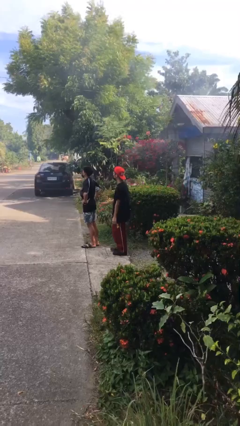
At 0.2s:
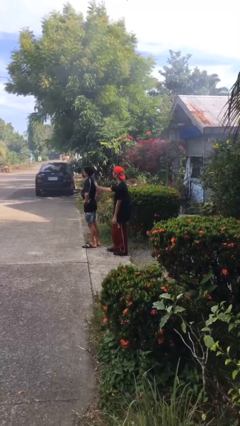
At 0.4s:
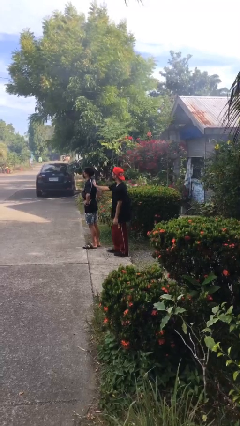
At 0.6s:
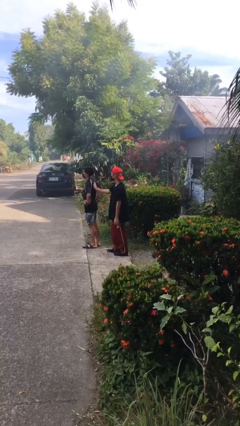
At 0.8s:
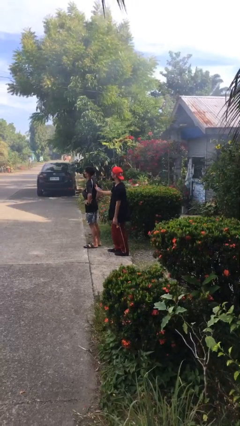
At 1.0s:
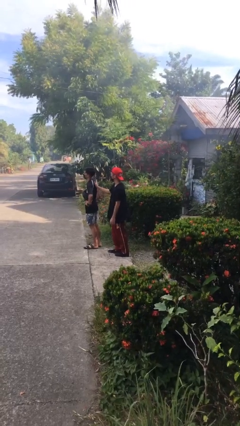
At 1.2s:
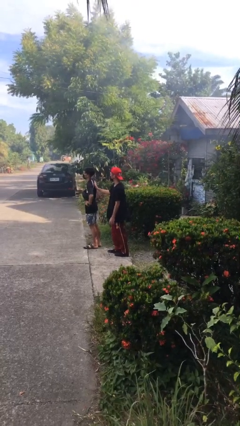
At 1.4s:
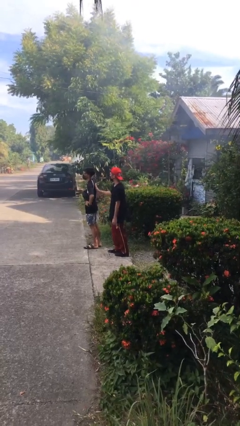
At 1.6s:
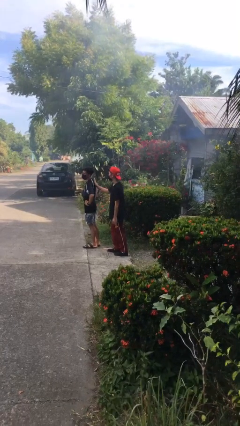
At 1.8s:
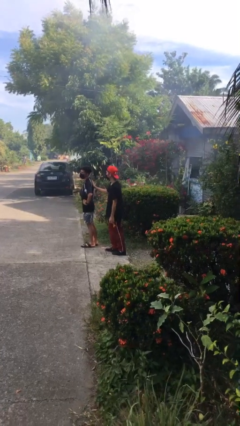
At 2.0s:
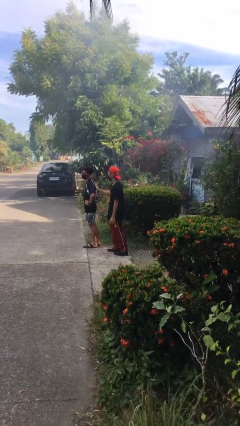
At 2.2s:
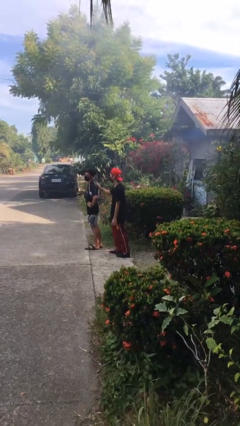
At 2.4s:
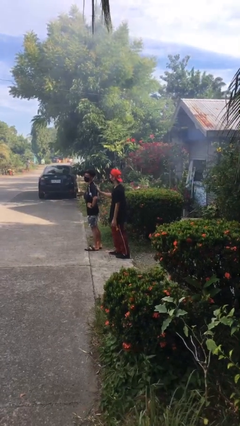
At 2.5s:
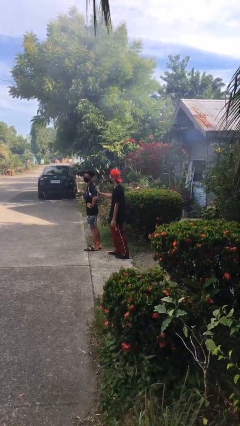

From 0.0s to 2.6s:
person touches back of person

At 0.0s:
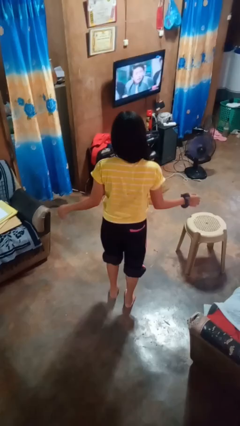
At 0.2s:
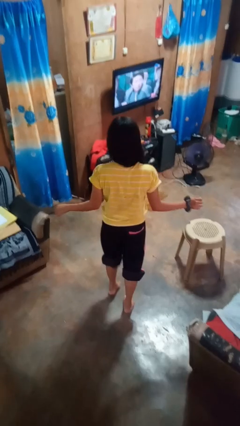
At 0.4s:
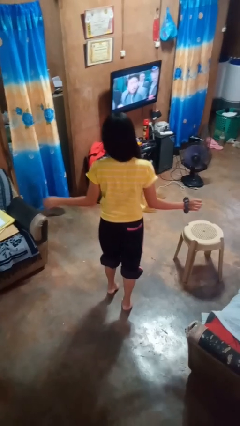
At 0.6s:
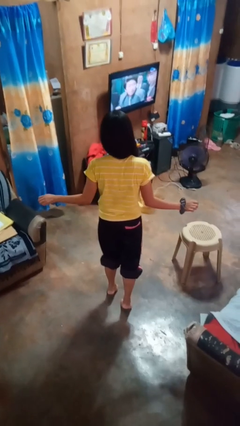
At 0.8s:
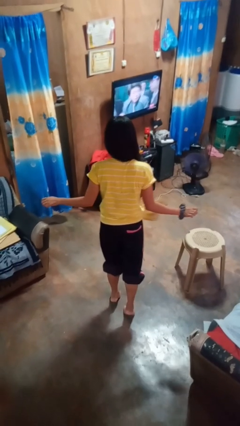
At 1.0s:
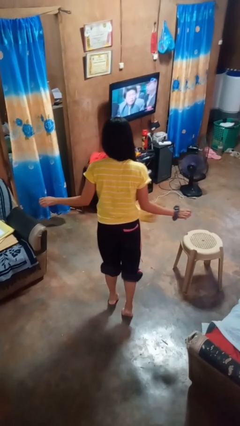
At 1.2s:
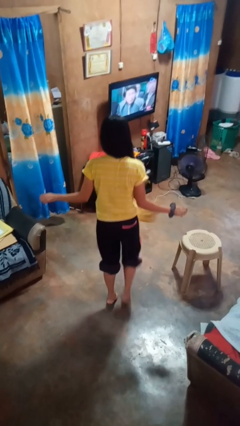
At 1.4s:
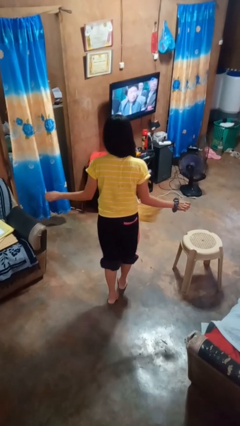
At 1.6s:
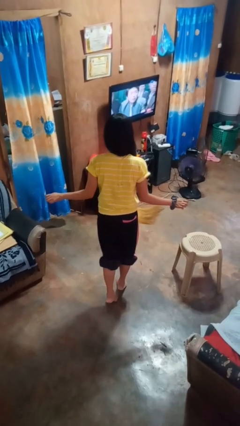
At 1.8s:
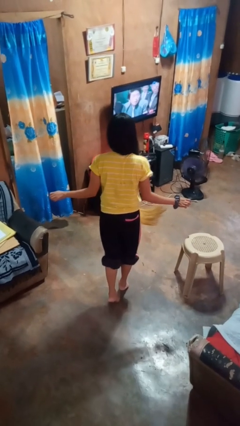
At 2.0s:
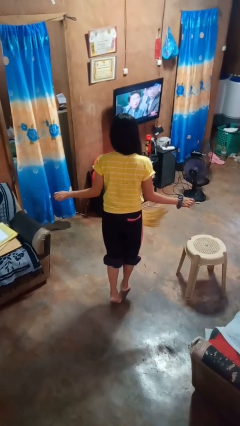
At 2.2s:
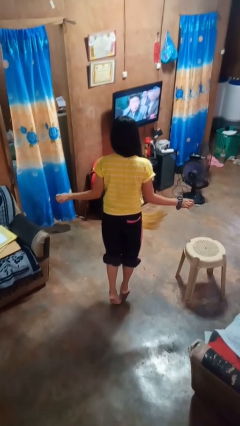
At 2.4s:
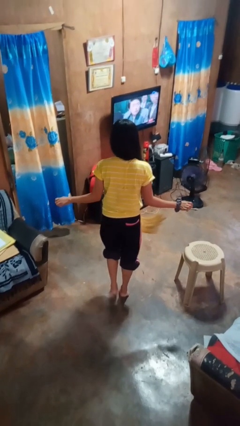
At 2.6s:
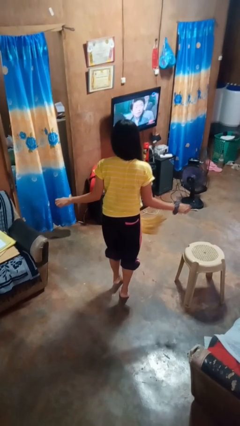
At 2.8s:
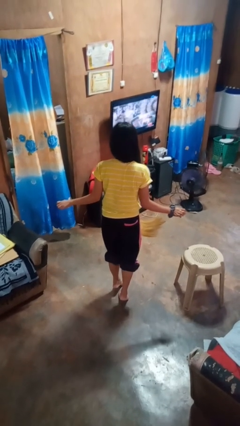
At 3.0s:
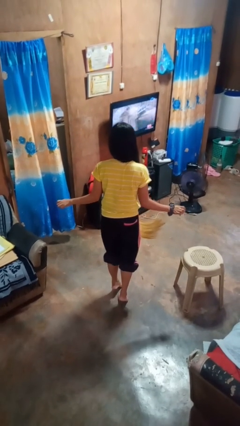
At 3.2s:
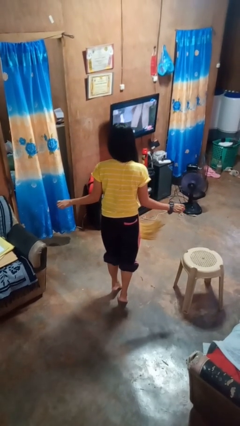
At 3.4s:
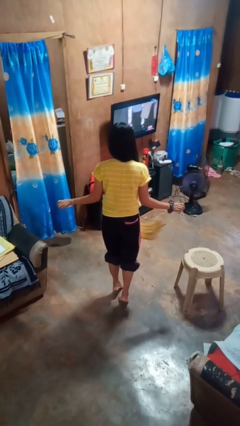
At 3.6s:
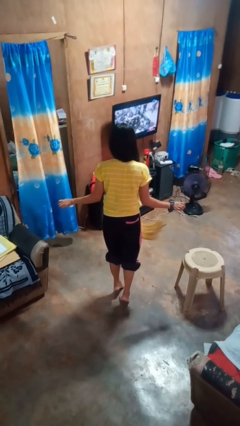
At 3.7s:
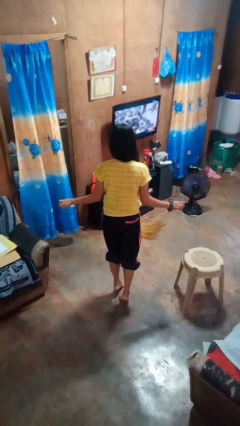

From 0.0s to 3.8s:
person walks tiptoe

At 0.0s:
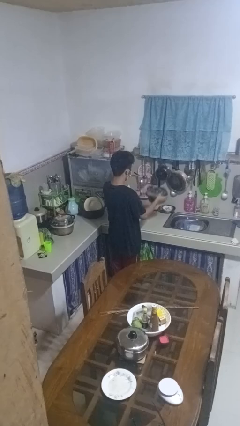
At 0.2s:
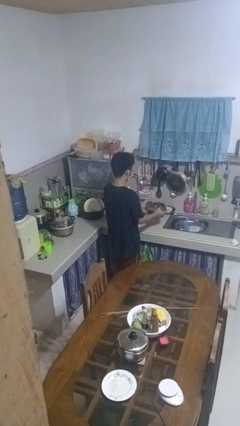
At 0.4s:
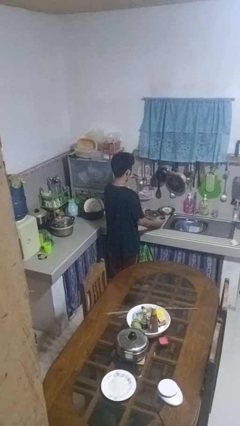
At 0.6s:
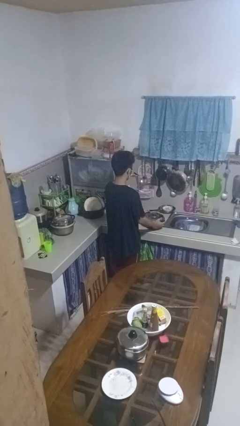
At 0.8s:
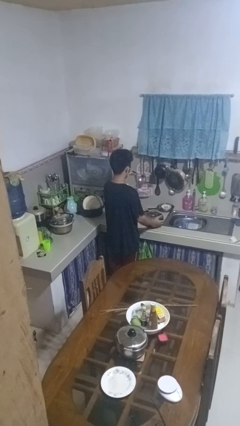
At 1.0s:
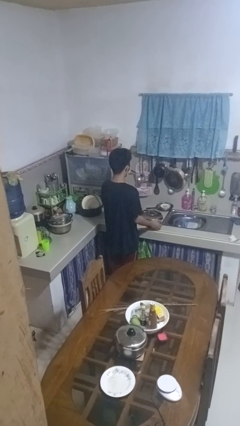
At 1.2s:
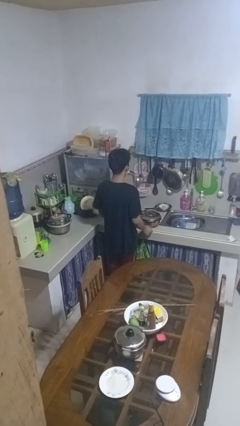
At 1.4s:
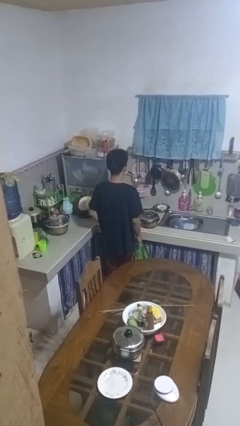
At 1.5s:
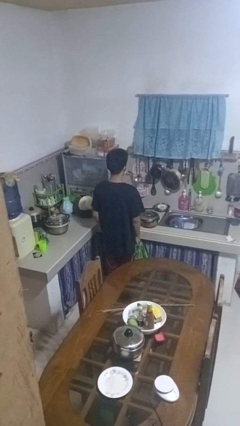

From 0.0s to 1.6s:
person puts down object on countertop

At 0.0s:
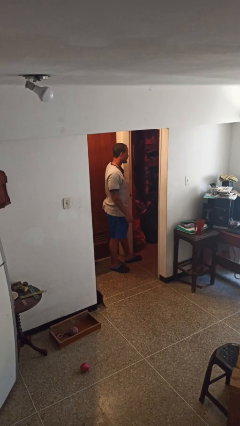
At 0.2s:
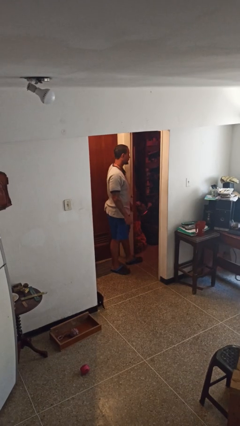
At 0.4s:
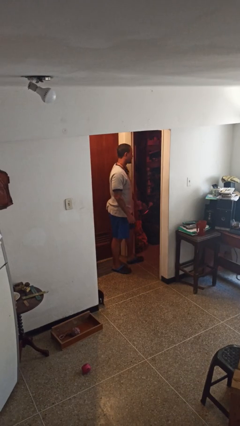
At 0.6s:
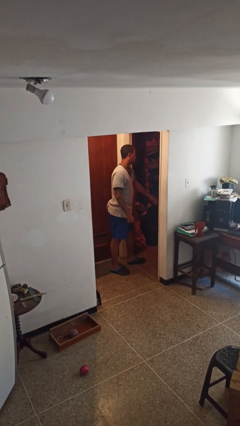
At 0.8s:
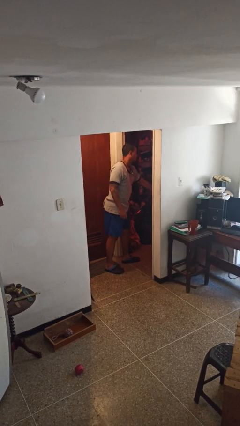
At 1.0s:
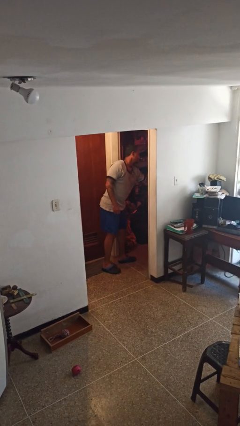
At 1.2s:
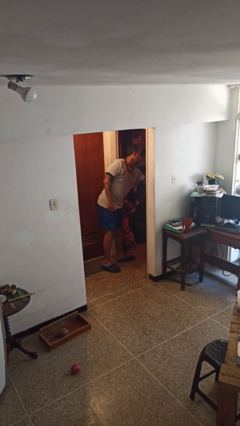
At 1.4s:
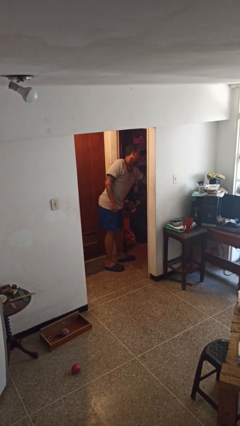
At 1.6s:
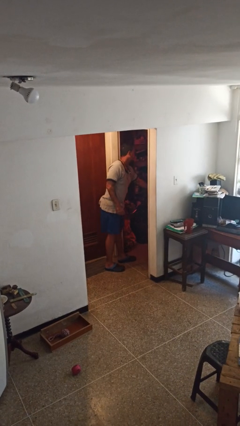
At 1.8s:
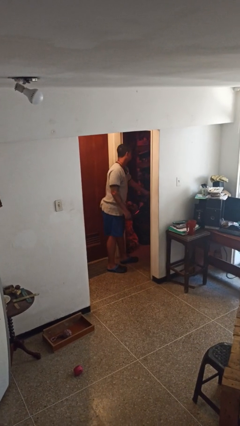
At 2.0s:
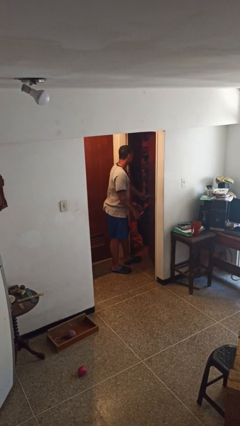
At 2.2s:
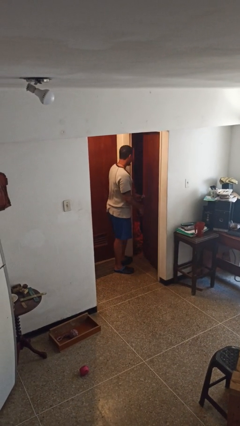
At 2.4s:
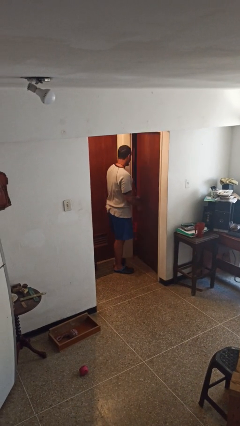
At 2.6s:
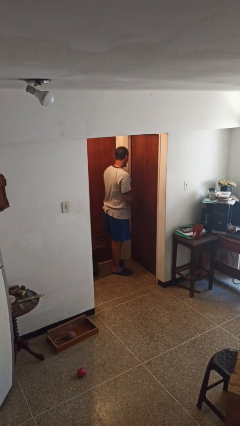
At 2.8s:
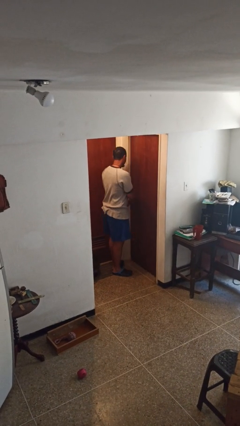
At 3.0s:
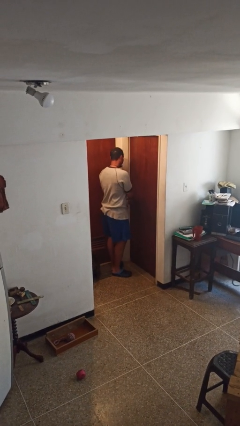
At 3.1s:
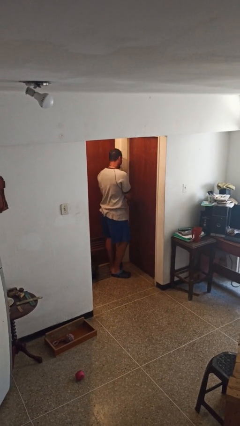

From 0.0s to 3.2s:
person closes facility door

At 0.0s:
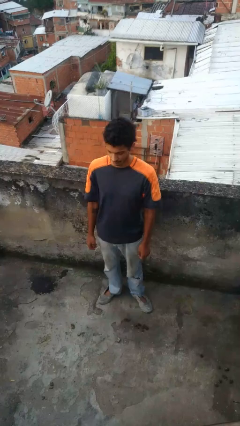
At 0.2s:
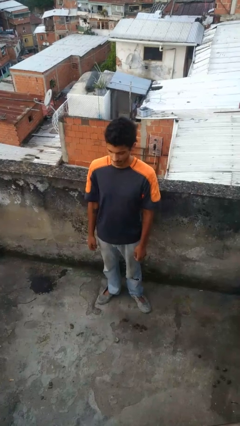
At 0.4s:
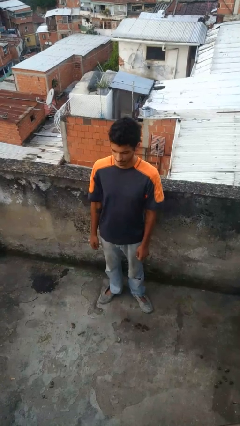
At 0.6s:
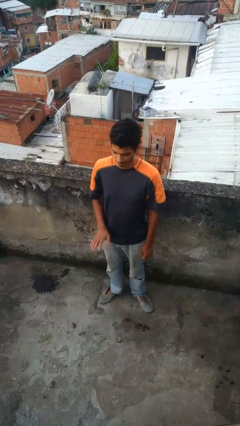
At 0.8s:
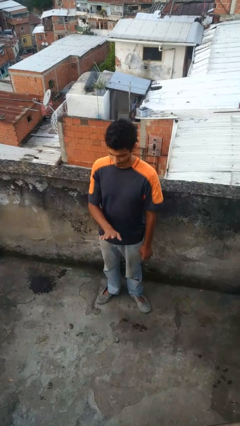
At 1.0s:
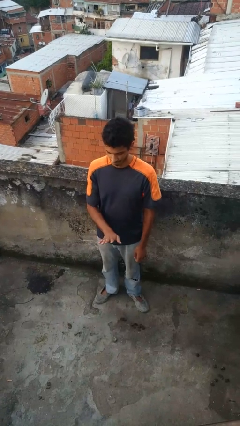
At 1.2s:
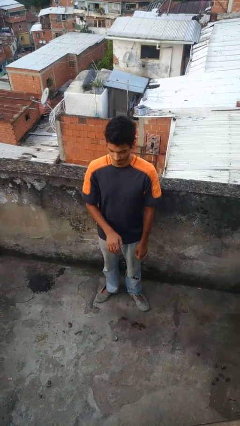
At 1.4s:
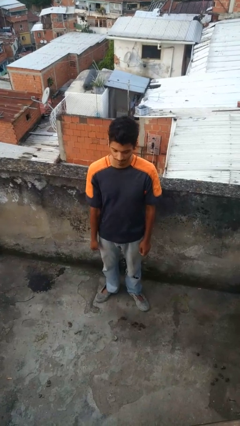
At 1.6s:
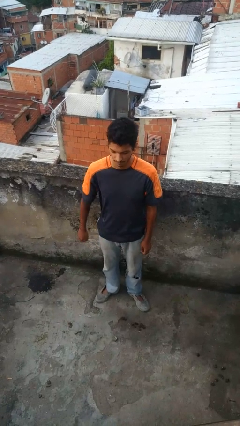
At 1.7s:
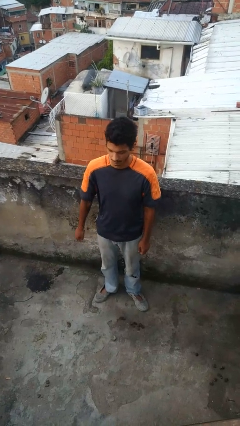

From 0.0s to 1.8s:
person gestures number five

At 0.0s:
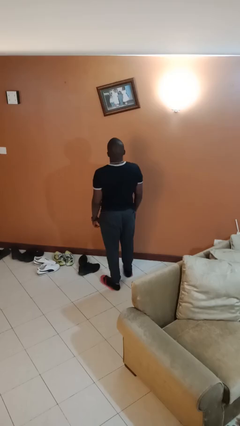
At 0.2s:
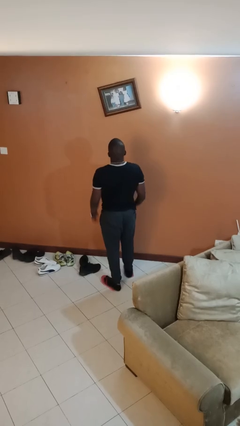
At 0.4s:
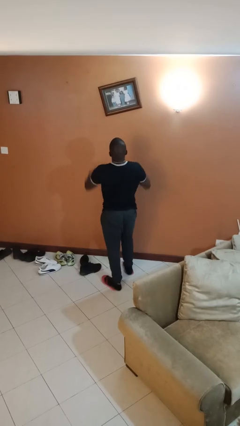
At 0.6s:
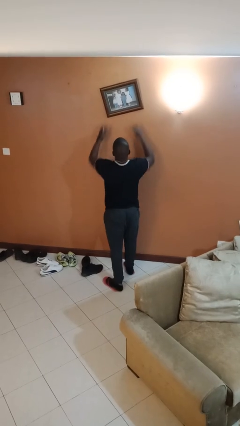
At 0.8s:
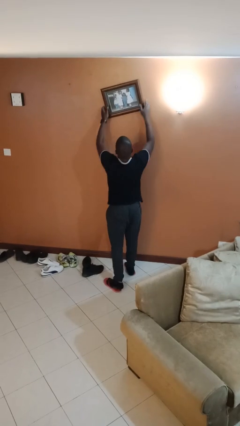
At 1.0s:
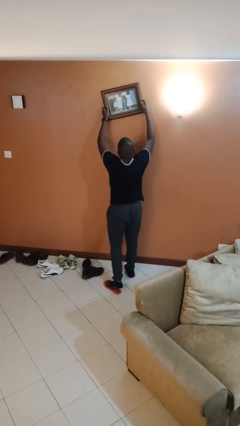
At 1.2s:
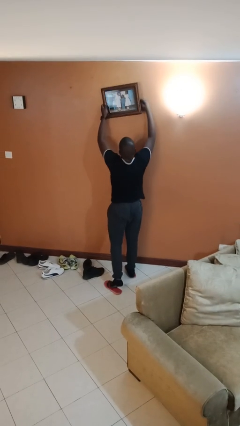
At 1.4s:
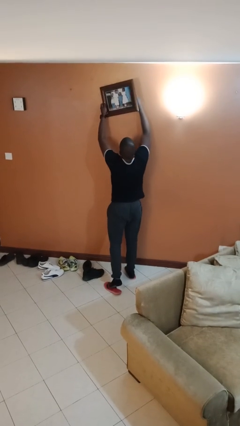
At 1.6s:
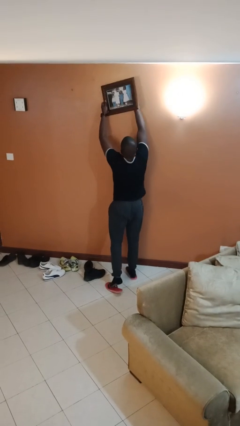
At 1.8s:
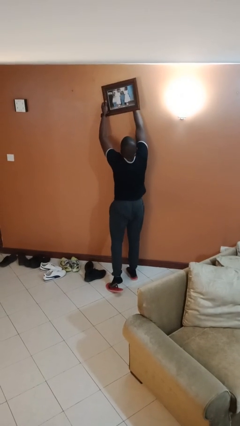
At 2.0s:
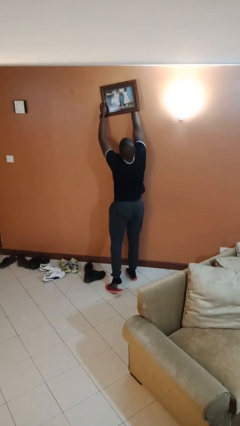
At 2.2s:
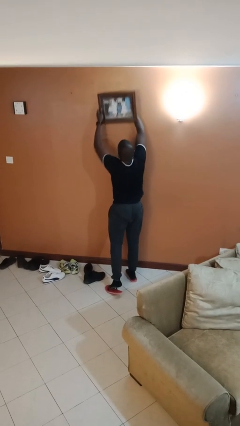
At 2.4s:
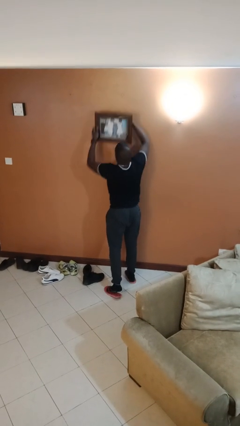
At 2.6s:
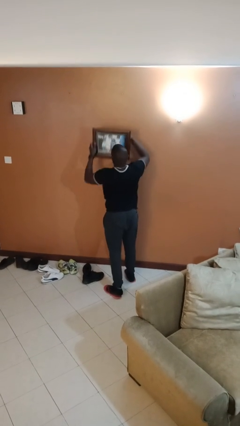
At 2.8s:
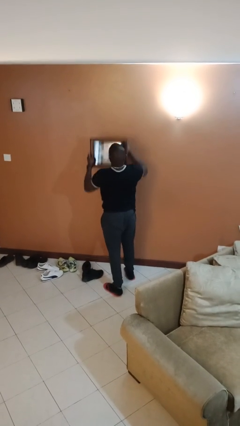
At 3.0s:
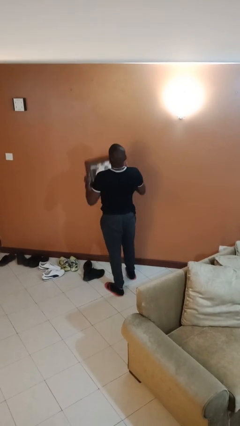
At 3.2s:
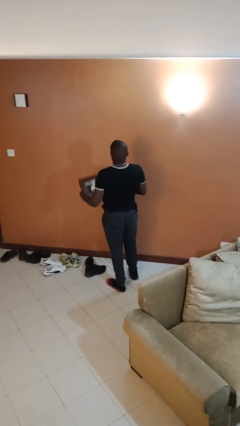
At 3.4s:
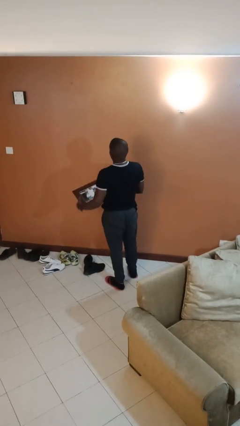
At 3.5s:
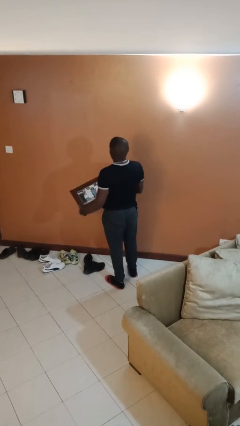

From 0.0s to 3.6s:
person takes down picture frame

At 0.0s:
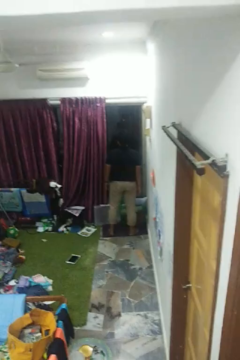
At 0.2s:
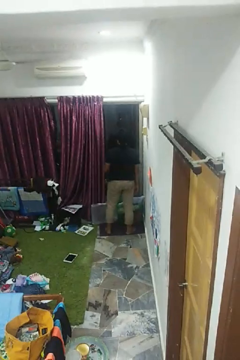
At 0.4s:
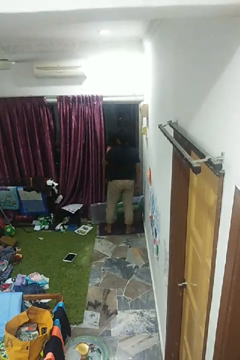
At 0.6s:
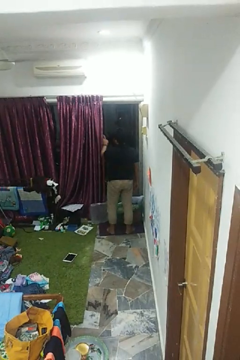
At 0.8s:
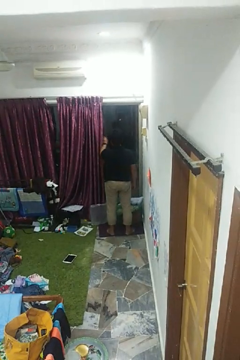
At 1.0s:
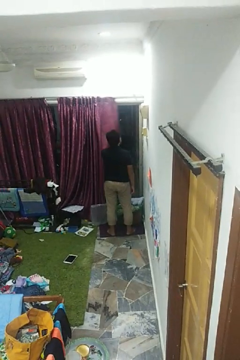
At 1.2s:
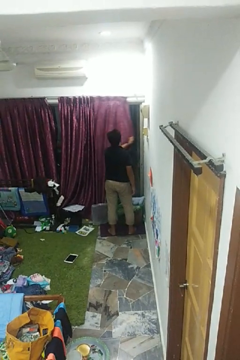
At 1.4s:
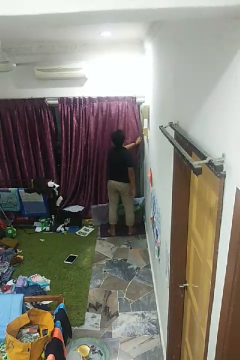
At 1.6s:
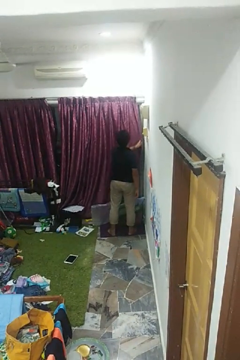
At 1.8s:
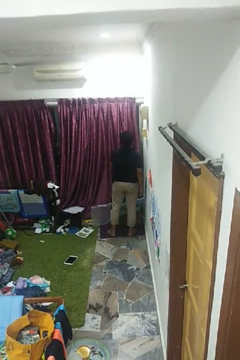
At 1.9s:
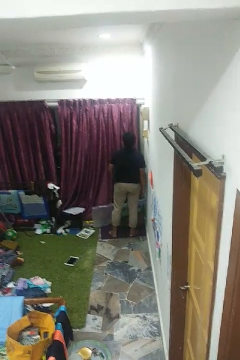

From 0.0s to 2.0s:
person closes curtains
